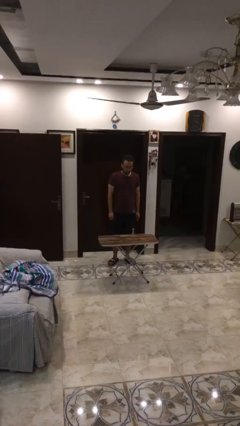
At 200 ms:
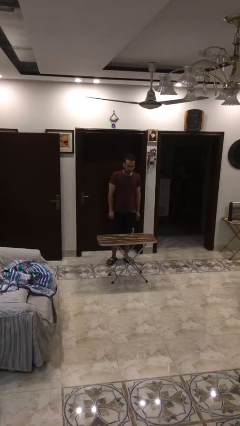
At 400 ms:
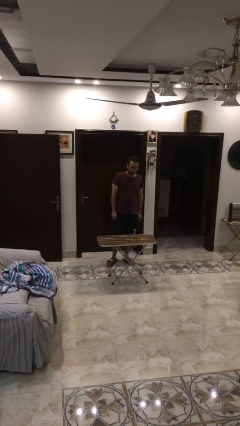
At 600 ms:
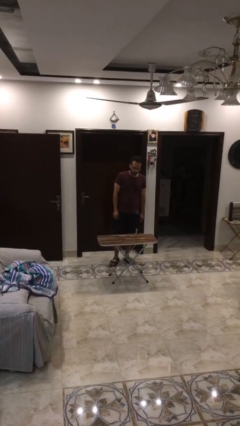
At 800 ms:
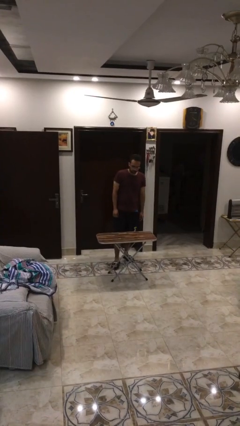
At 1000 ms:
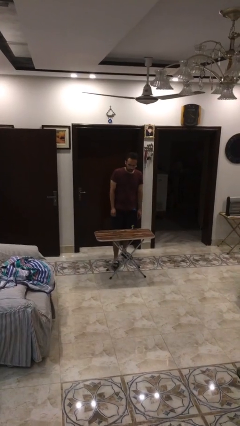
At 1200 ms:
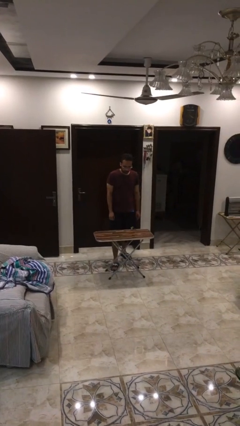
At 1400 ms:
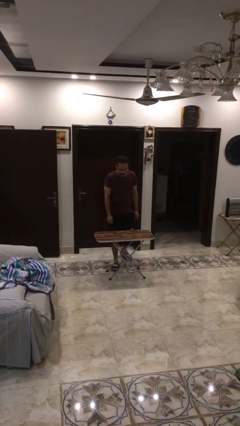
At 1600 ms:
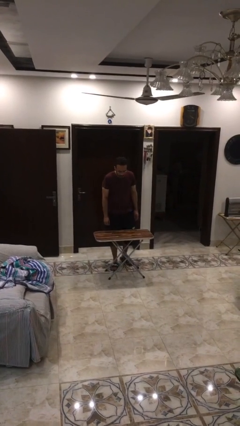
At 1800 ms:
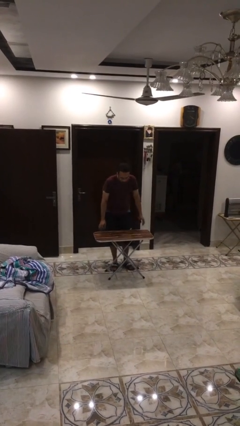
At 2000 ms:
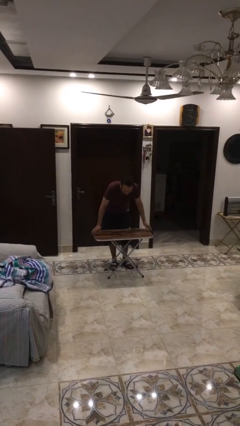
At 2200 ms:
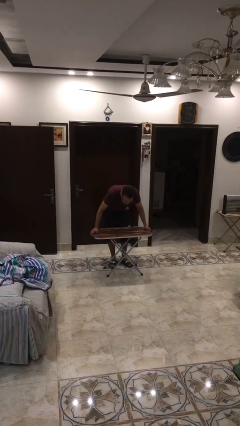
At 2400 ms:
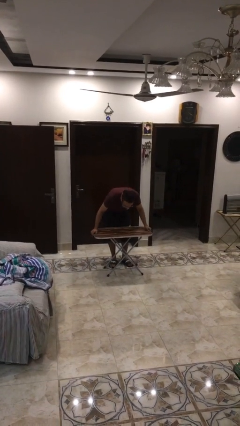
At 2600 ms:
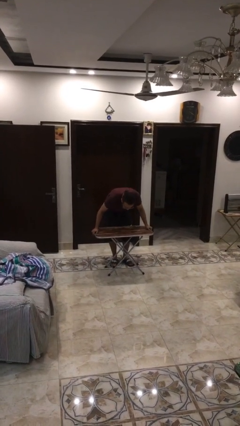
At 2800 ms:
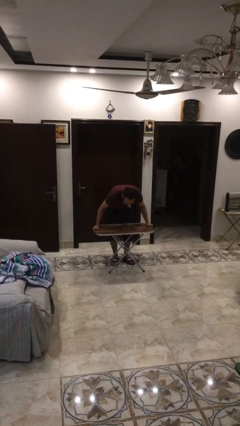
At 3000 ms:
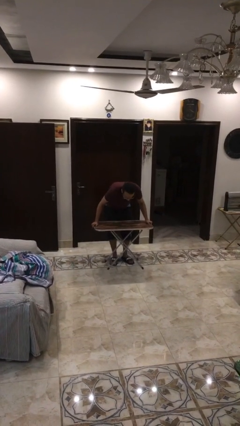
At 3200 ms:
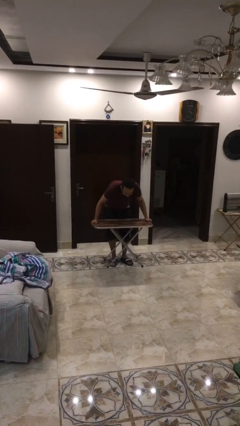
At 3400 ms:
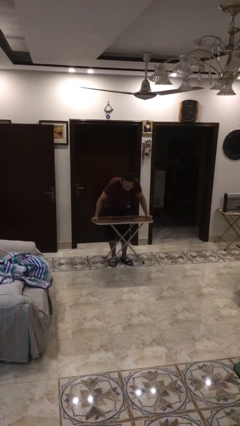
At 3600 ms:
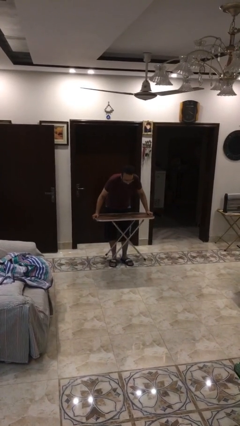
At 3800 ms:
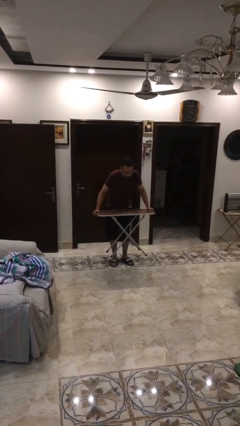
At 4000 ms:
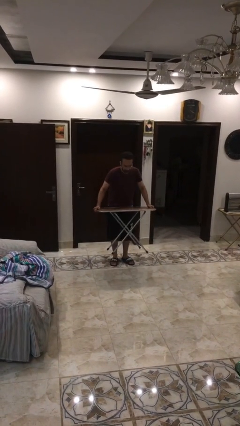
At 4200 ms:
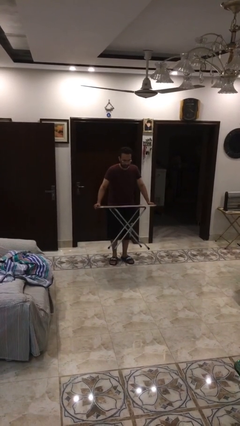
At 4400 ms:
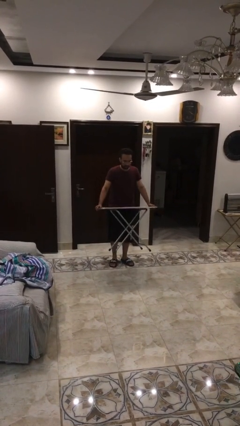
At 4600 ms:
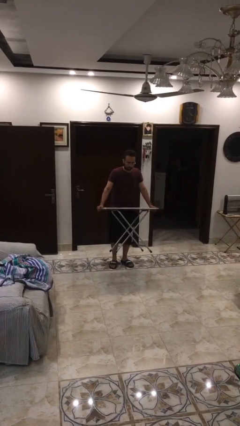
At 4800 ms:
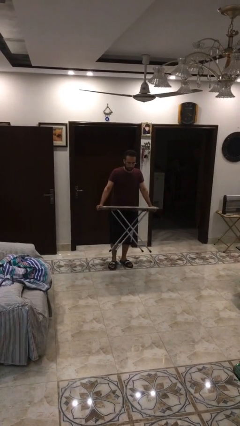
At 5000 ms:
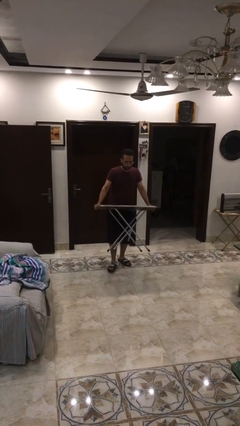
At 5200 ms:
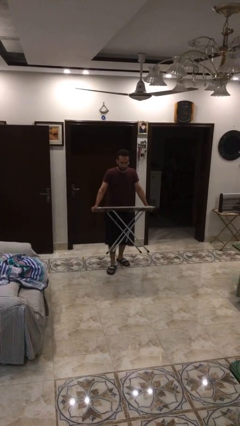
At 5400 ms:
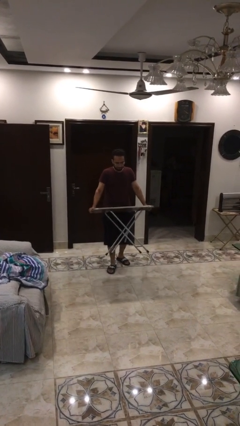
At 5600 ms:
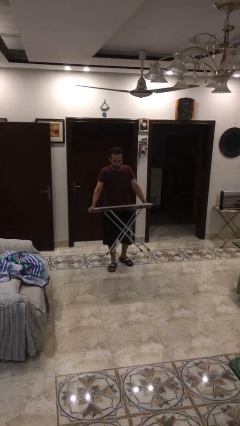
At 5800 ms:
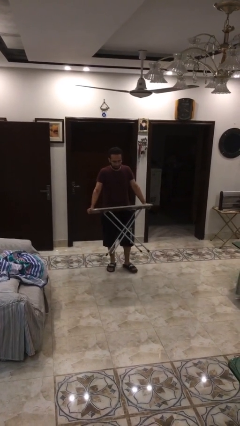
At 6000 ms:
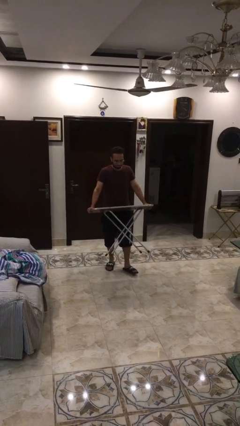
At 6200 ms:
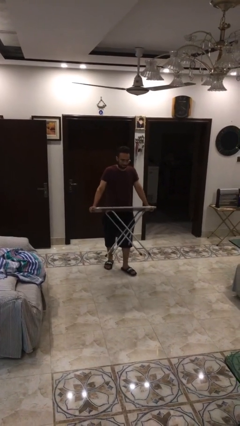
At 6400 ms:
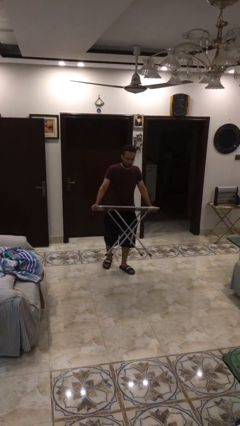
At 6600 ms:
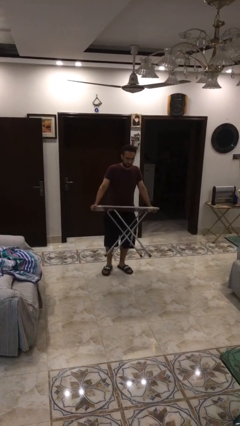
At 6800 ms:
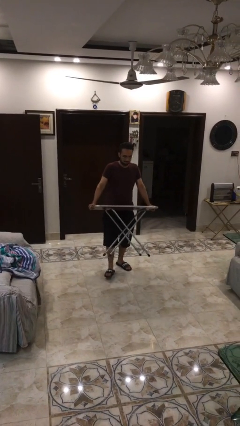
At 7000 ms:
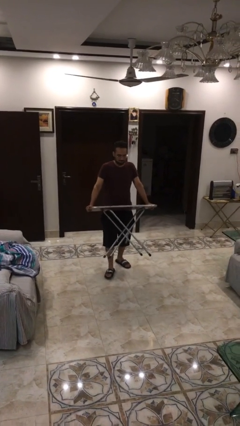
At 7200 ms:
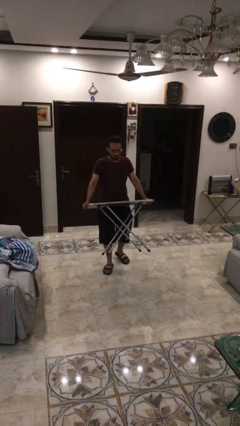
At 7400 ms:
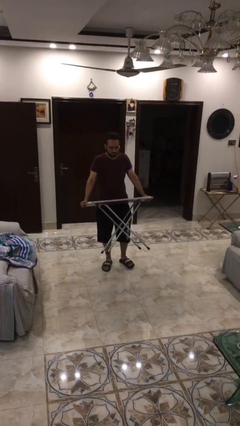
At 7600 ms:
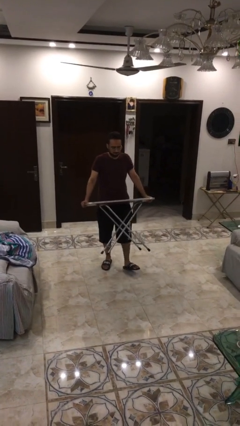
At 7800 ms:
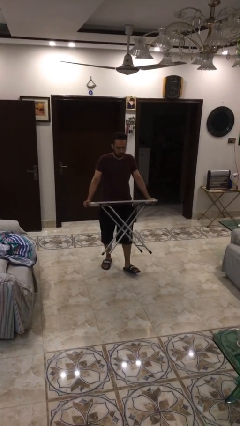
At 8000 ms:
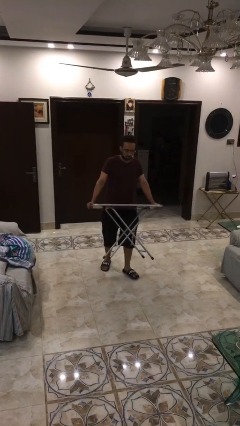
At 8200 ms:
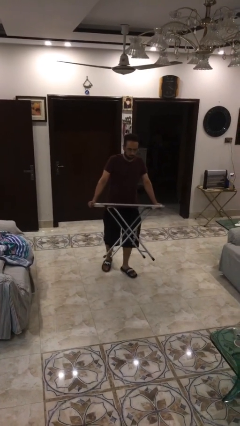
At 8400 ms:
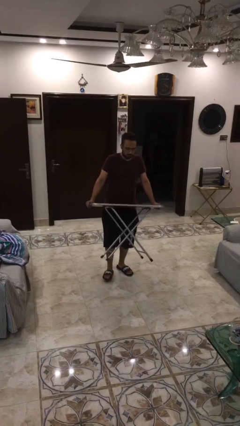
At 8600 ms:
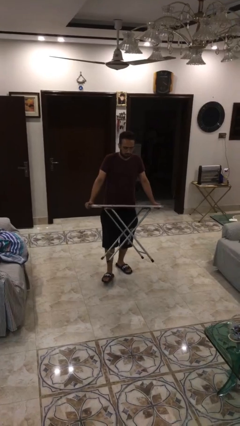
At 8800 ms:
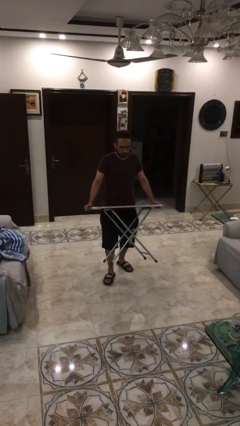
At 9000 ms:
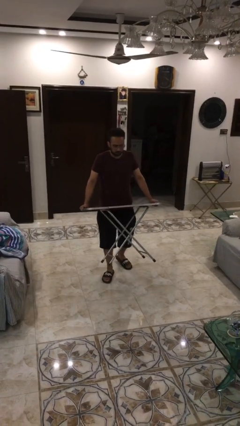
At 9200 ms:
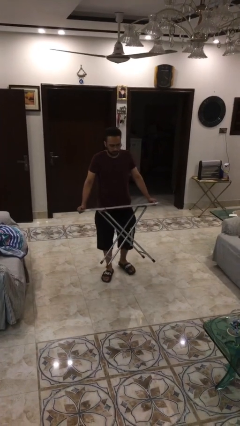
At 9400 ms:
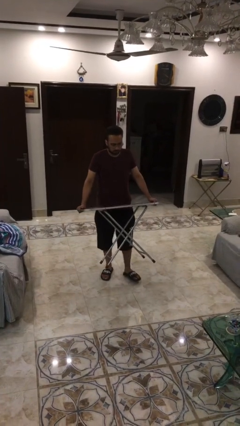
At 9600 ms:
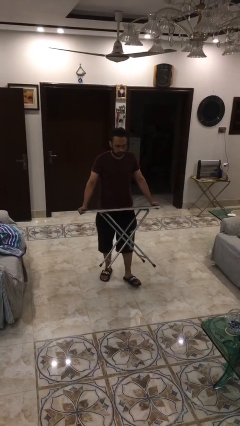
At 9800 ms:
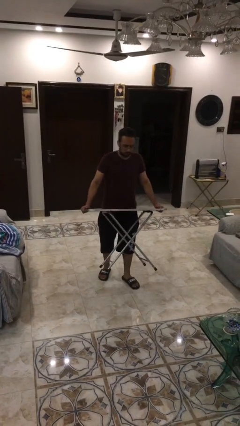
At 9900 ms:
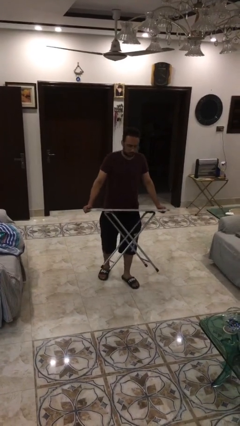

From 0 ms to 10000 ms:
person carries heavy object

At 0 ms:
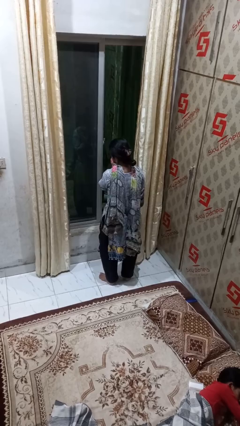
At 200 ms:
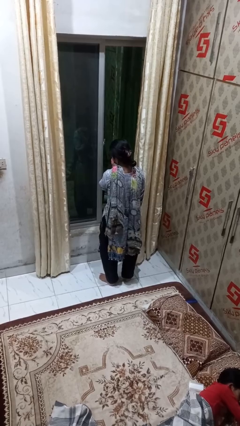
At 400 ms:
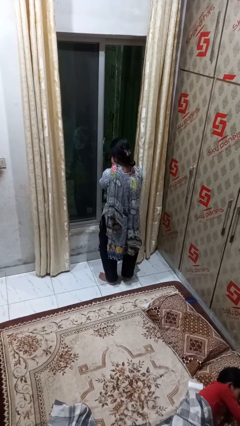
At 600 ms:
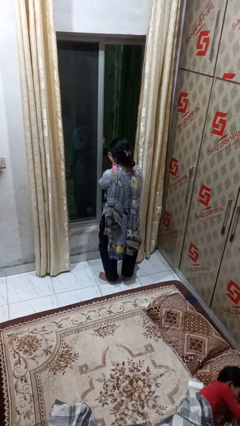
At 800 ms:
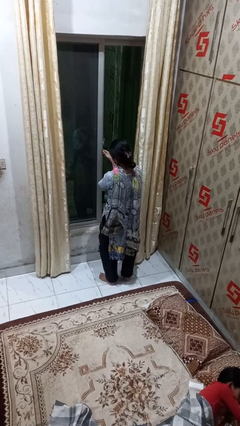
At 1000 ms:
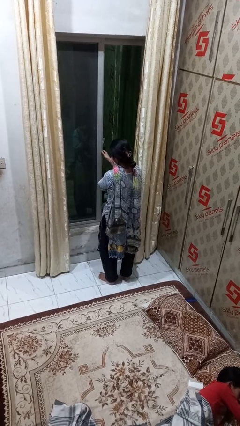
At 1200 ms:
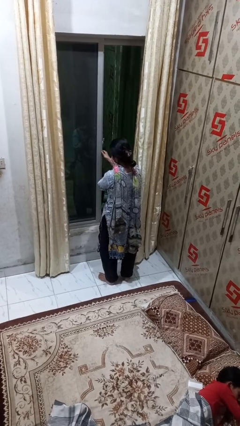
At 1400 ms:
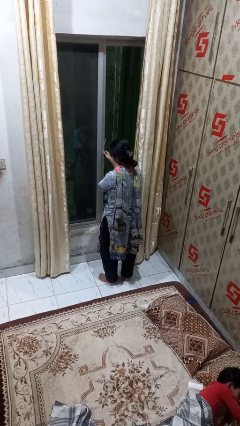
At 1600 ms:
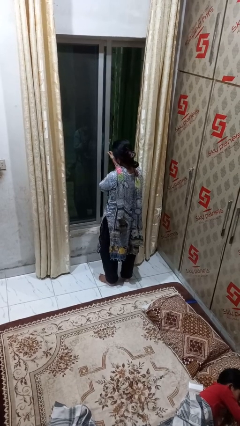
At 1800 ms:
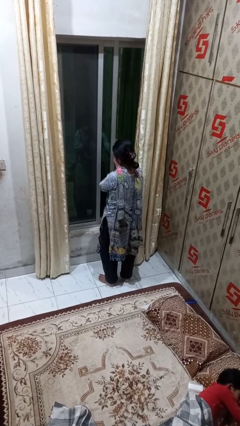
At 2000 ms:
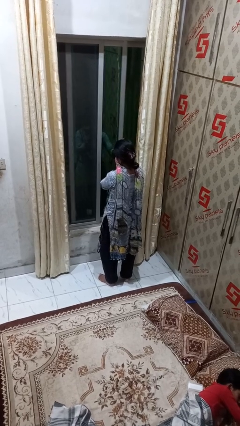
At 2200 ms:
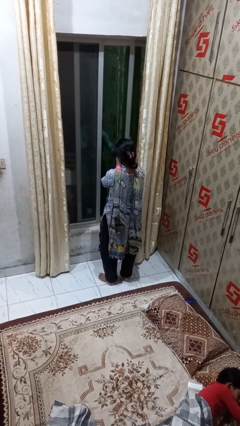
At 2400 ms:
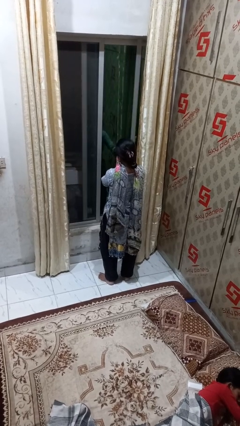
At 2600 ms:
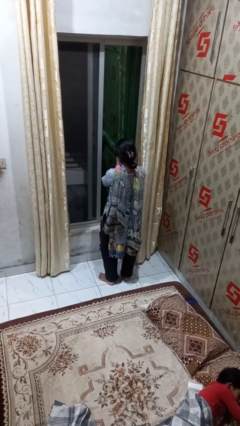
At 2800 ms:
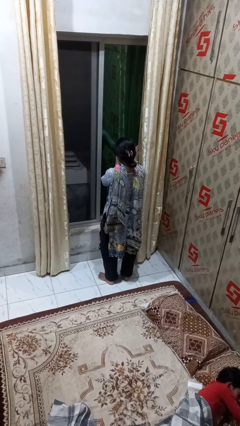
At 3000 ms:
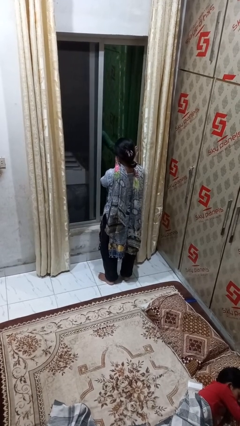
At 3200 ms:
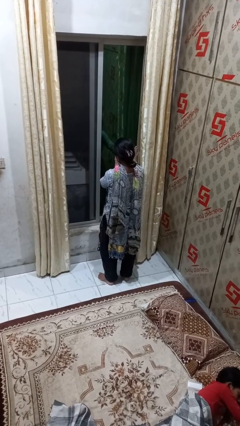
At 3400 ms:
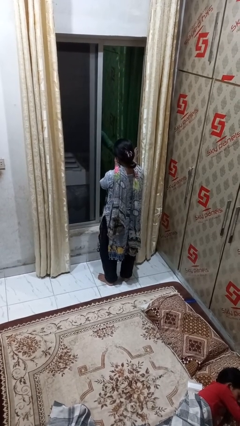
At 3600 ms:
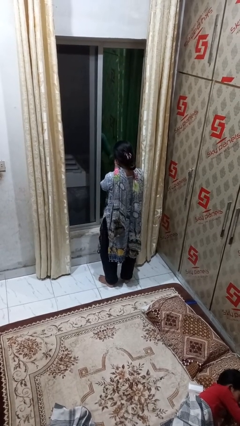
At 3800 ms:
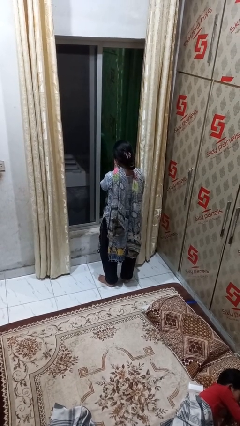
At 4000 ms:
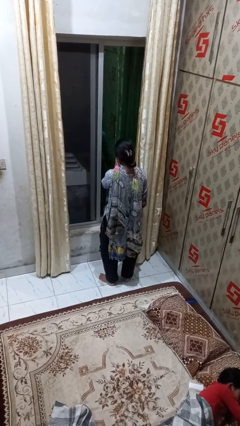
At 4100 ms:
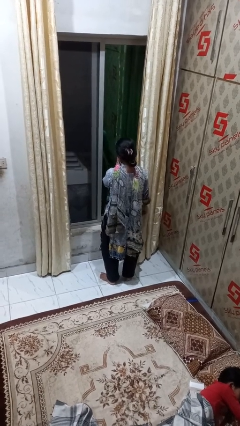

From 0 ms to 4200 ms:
person opens home window

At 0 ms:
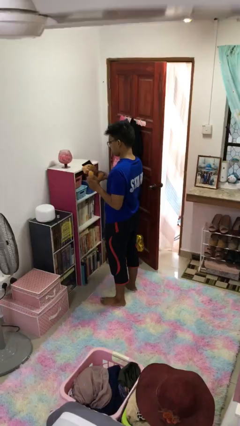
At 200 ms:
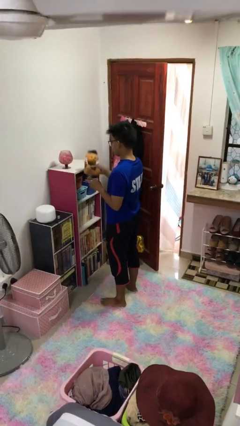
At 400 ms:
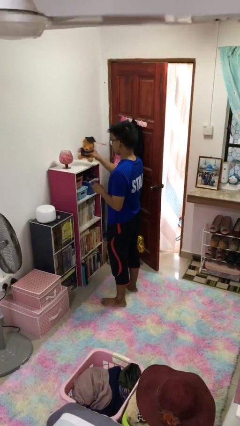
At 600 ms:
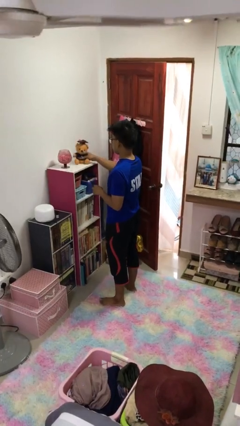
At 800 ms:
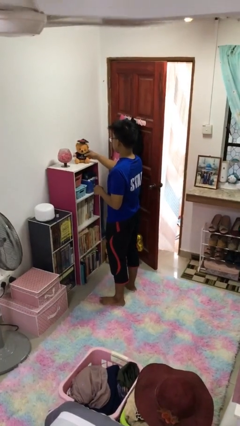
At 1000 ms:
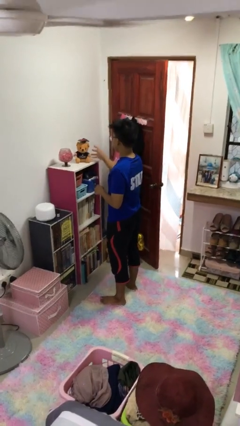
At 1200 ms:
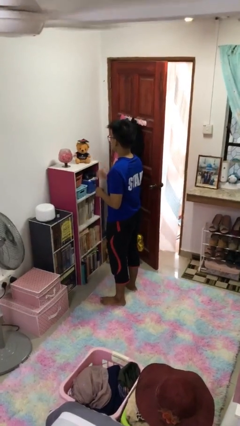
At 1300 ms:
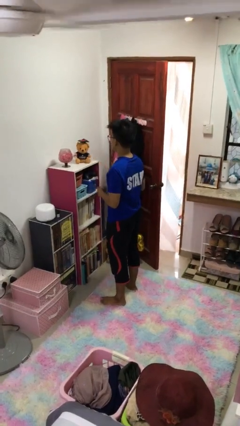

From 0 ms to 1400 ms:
person puts down object on shelf

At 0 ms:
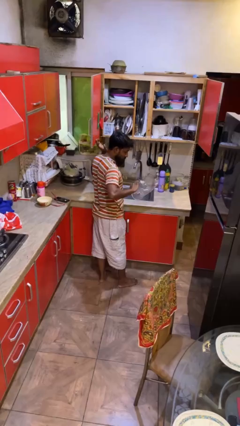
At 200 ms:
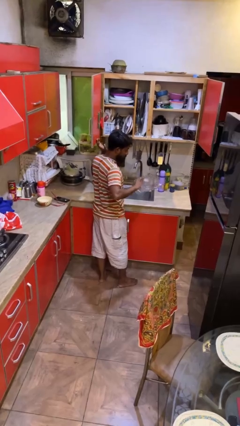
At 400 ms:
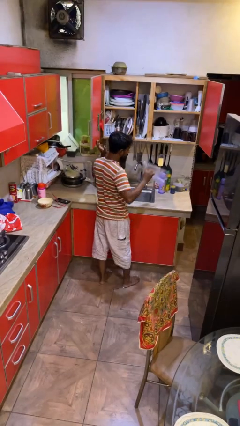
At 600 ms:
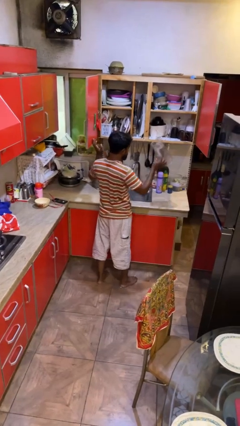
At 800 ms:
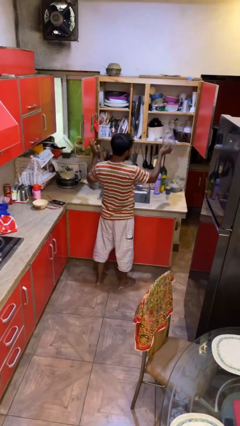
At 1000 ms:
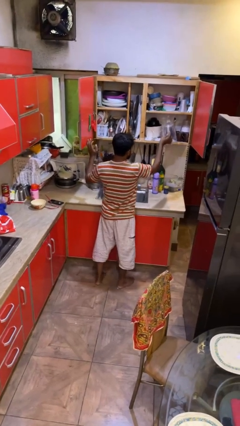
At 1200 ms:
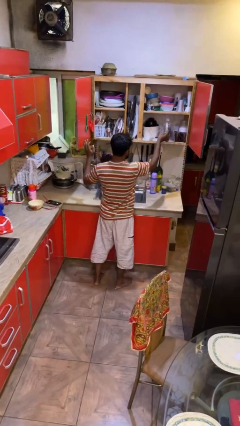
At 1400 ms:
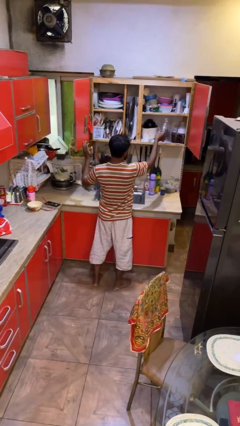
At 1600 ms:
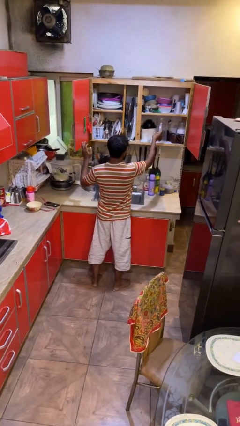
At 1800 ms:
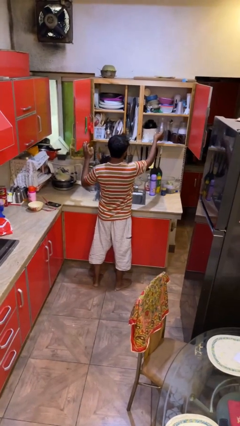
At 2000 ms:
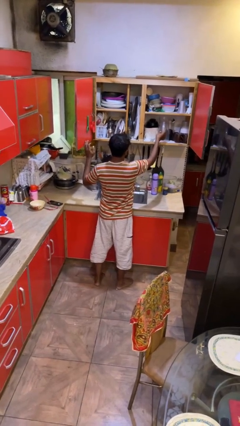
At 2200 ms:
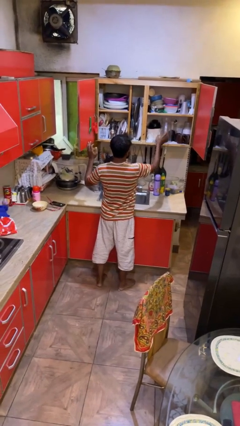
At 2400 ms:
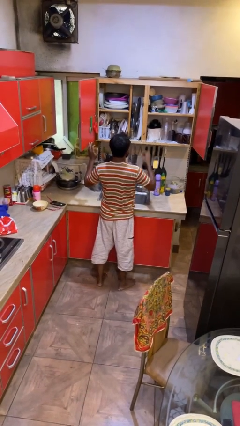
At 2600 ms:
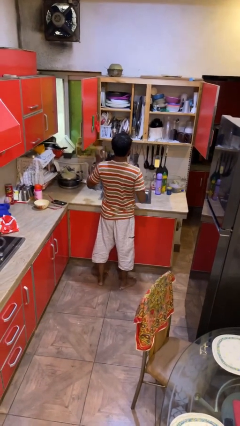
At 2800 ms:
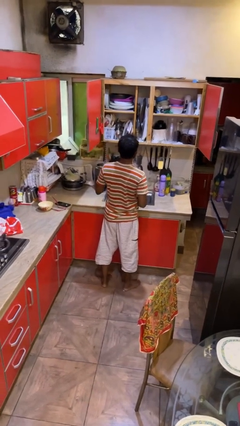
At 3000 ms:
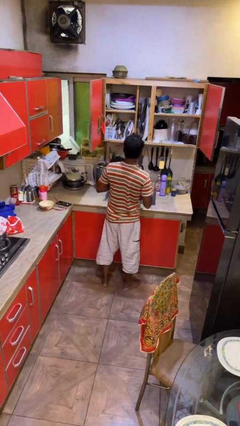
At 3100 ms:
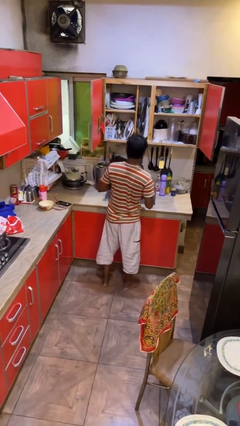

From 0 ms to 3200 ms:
person puts down object into cabinet
